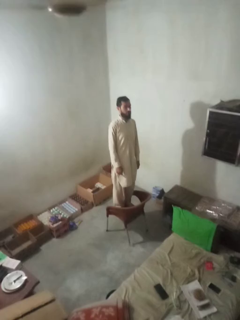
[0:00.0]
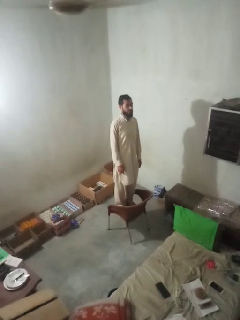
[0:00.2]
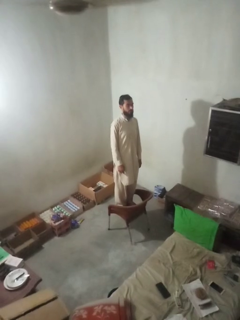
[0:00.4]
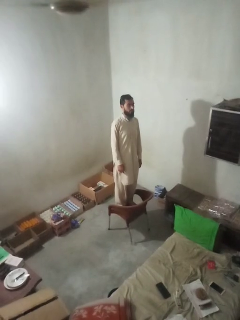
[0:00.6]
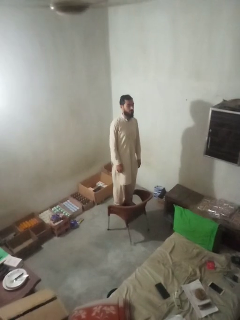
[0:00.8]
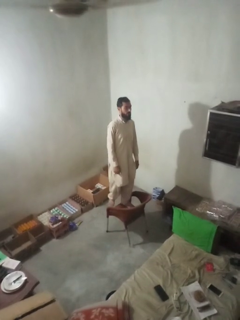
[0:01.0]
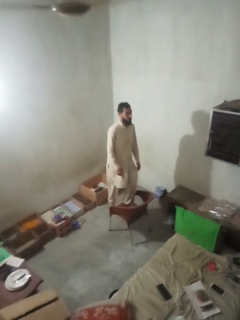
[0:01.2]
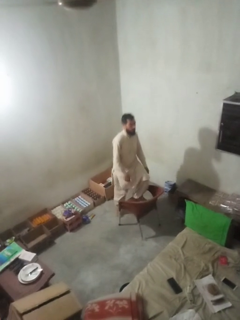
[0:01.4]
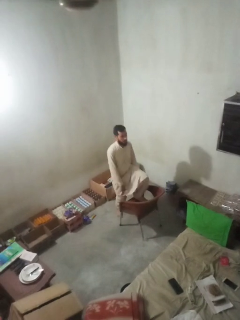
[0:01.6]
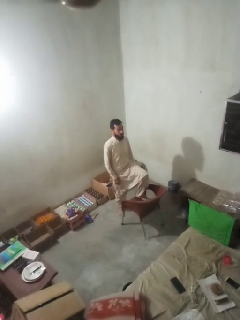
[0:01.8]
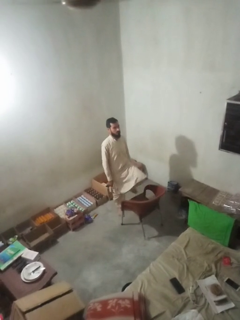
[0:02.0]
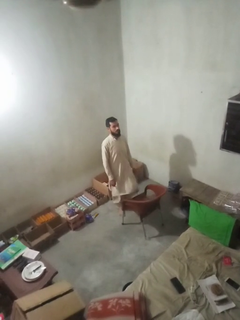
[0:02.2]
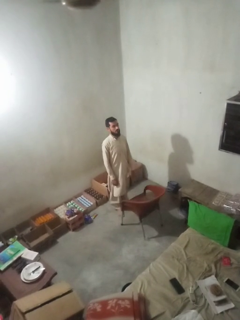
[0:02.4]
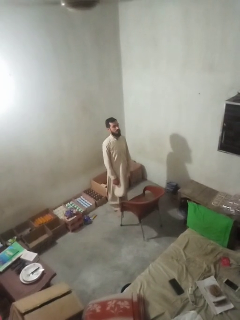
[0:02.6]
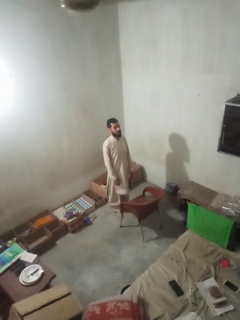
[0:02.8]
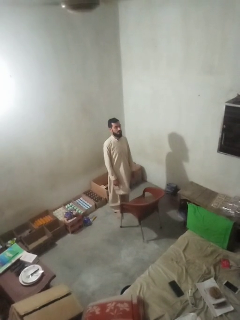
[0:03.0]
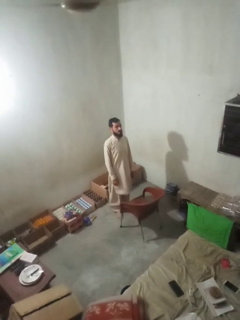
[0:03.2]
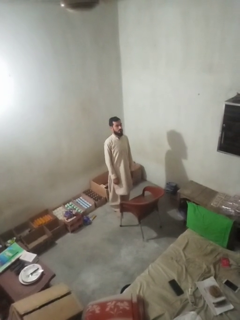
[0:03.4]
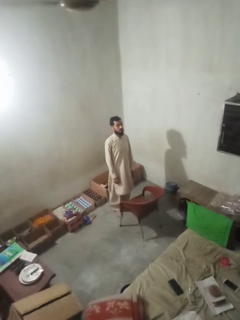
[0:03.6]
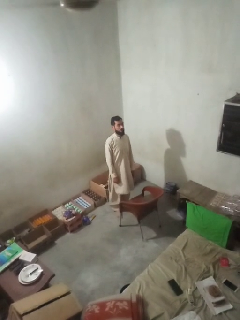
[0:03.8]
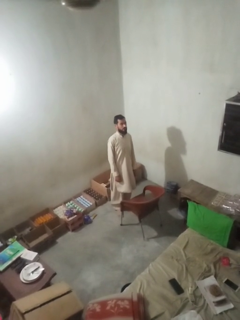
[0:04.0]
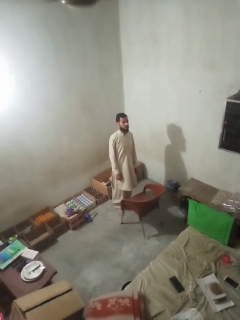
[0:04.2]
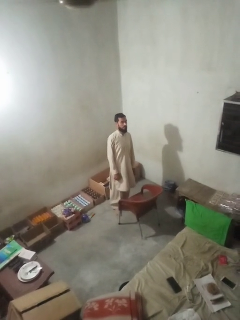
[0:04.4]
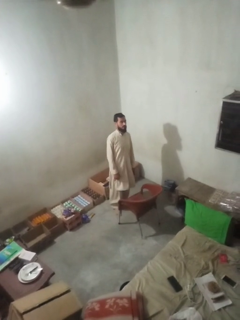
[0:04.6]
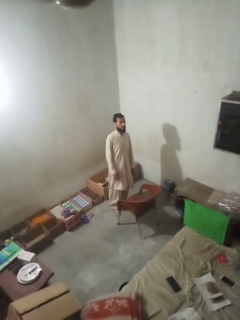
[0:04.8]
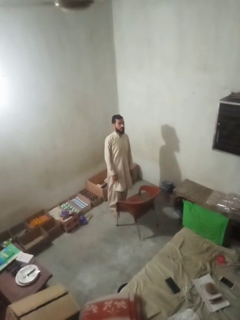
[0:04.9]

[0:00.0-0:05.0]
person climbs off chair

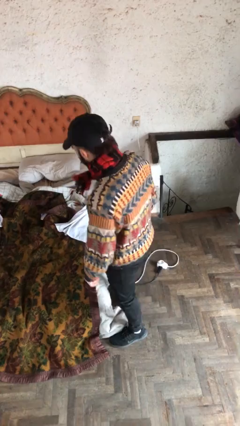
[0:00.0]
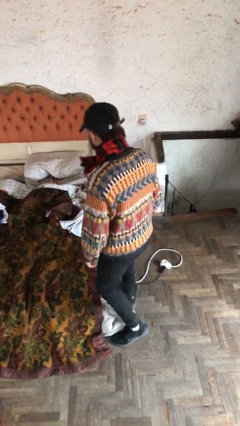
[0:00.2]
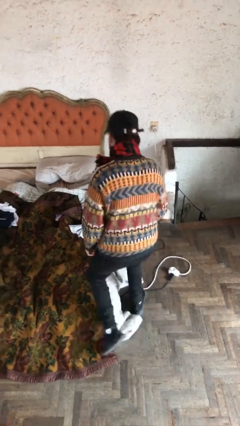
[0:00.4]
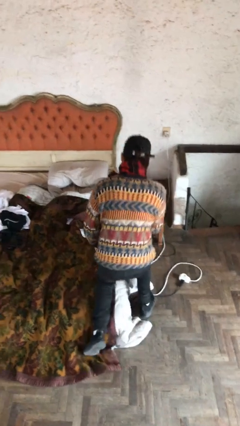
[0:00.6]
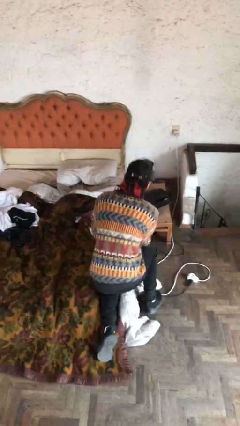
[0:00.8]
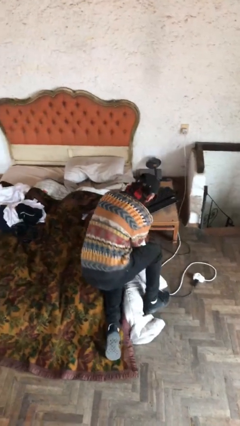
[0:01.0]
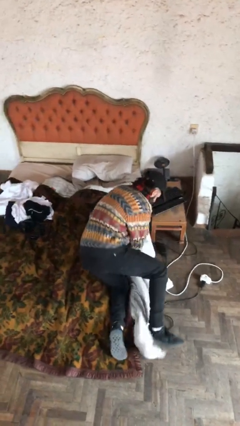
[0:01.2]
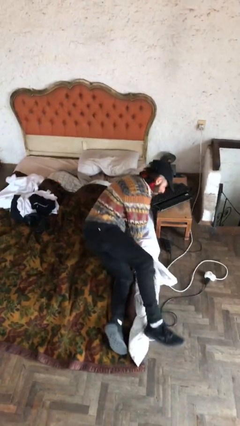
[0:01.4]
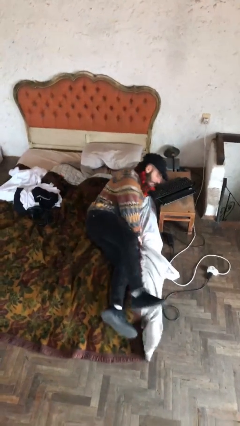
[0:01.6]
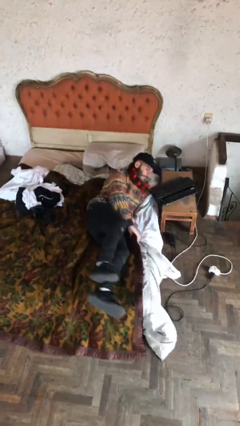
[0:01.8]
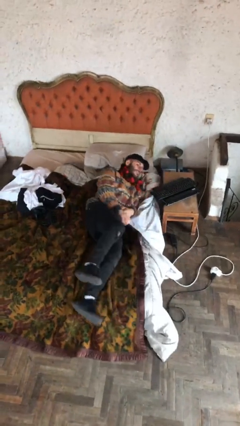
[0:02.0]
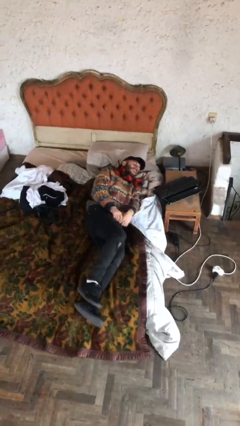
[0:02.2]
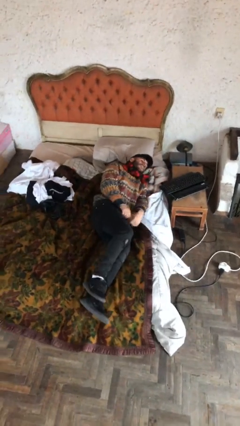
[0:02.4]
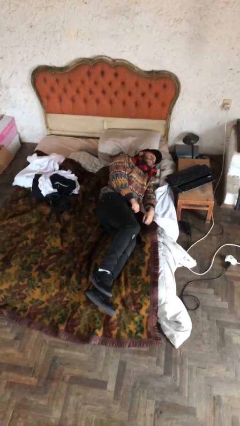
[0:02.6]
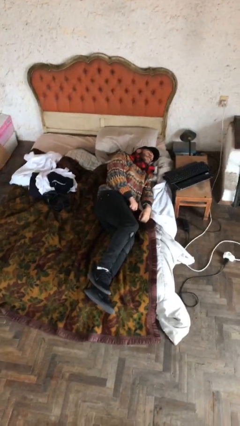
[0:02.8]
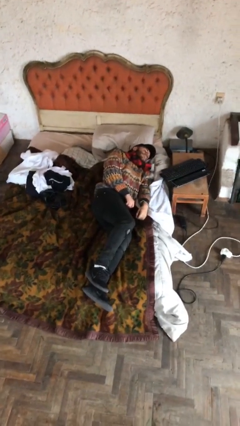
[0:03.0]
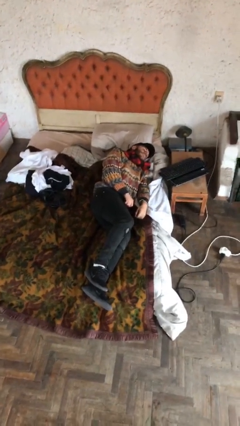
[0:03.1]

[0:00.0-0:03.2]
person lies down on bed

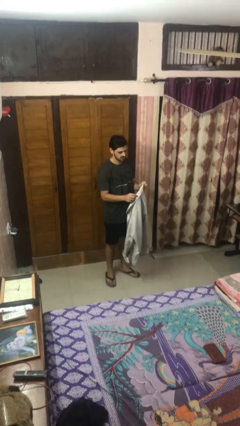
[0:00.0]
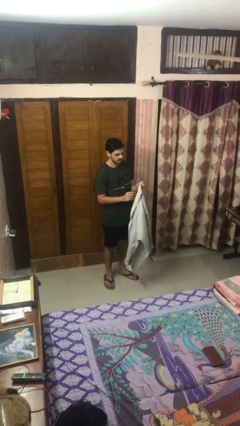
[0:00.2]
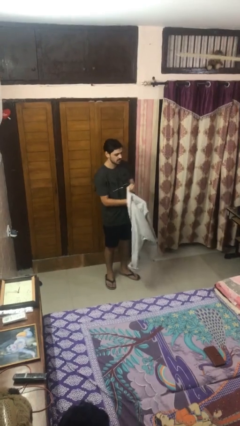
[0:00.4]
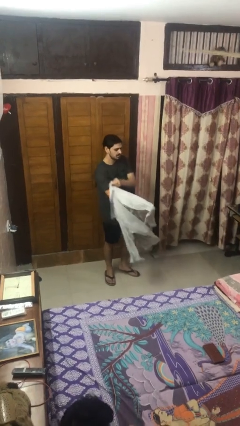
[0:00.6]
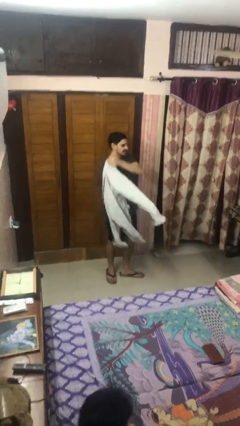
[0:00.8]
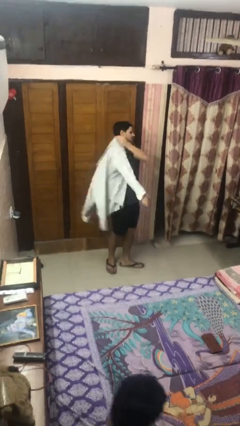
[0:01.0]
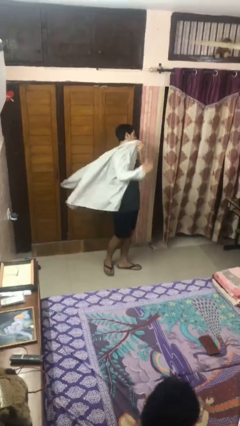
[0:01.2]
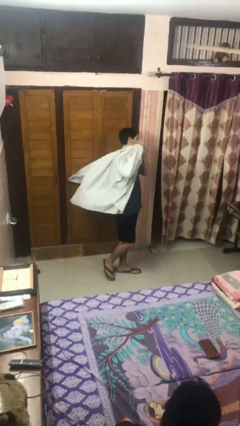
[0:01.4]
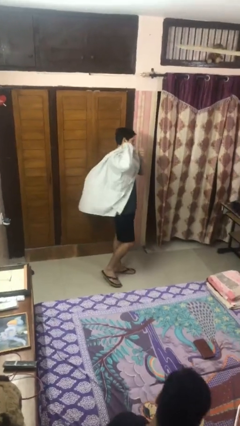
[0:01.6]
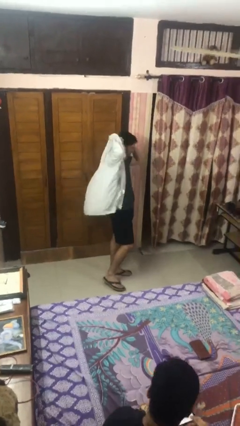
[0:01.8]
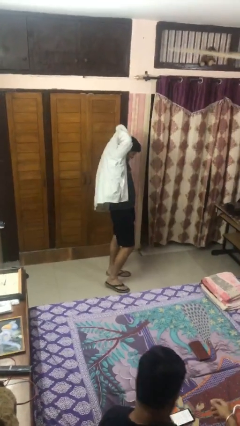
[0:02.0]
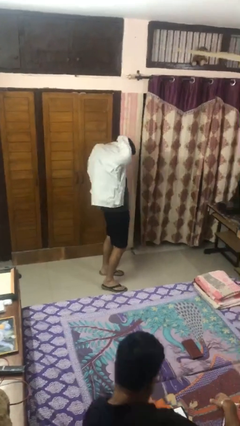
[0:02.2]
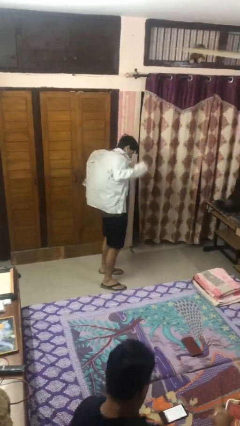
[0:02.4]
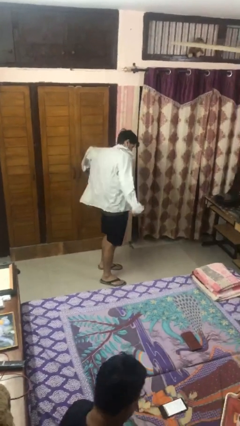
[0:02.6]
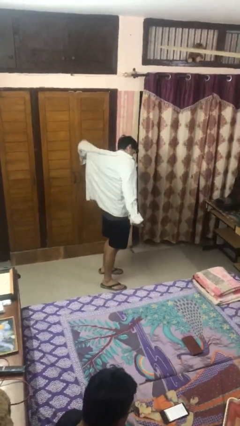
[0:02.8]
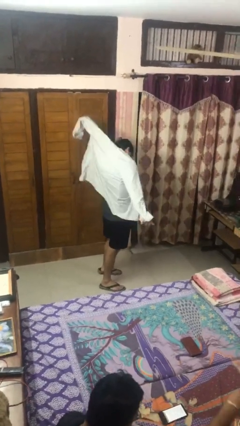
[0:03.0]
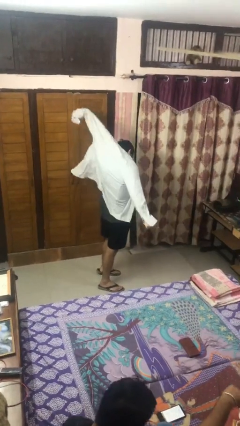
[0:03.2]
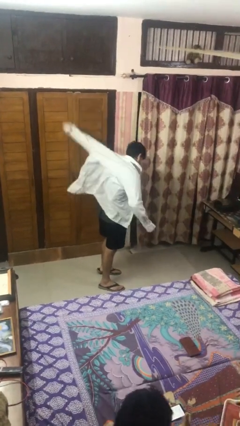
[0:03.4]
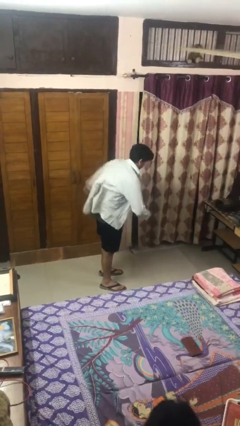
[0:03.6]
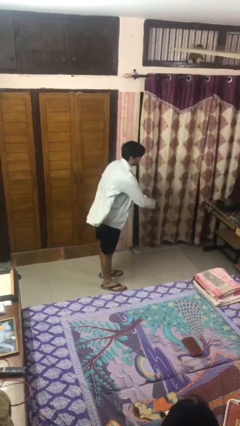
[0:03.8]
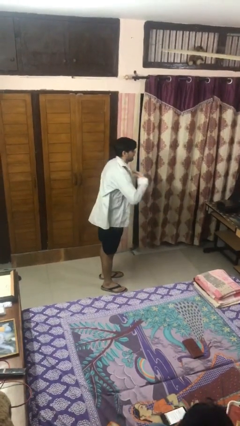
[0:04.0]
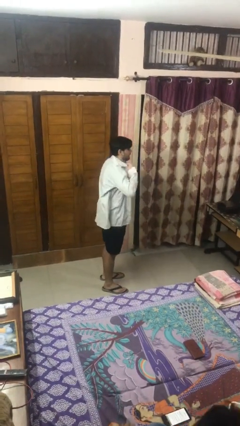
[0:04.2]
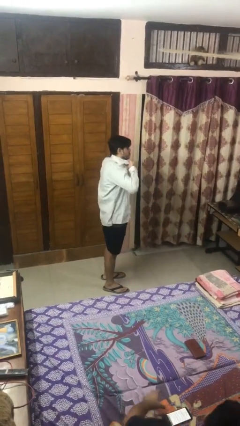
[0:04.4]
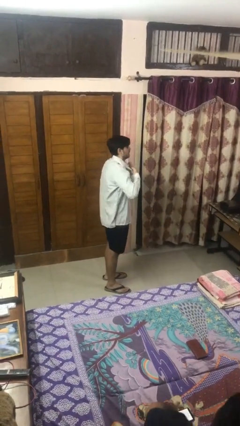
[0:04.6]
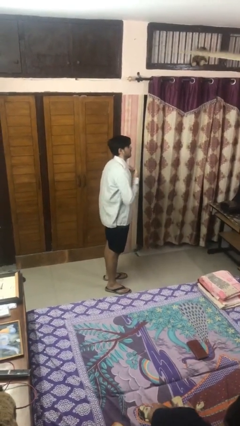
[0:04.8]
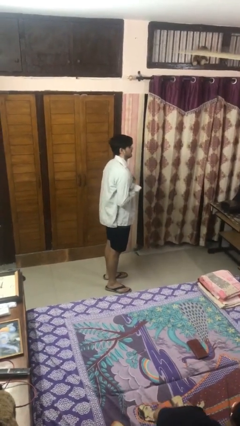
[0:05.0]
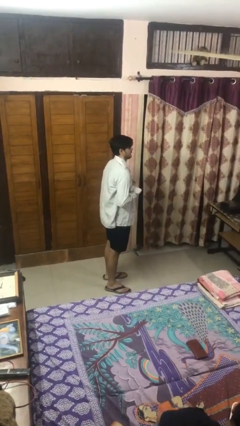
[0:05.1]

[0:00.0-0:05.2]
person puts on shirt

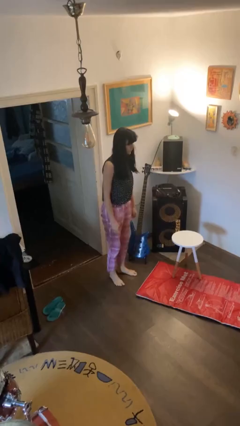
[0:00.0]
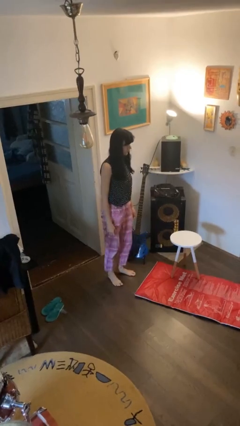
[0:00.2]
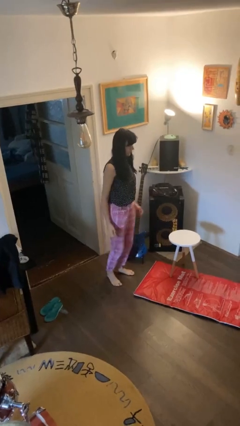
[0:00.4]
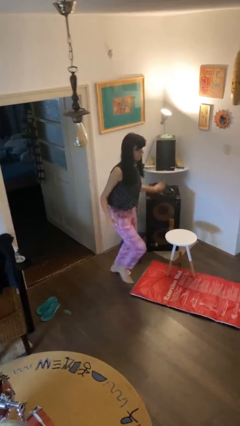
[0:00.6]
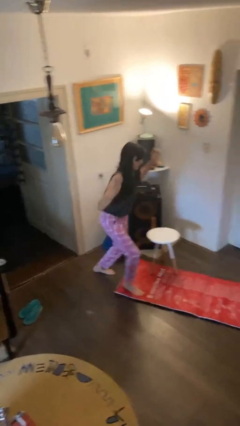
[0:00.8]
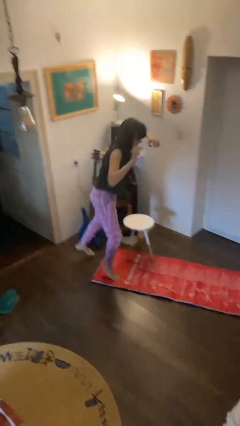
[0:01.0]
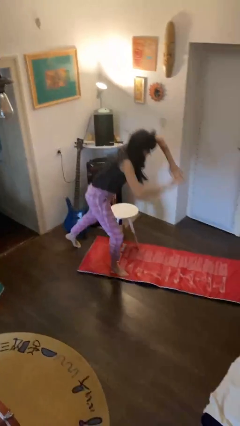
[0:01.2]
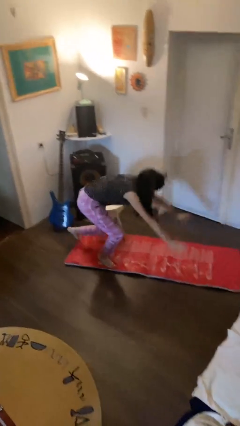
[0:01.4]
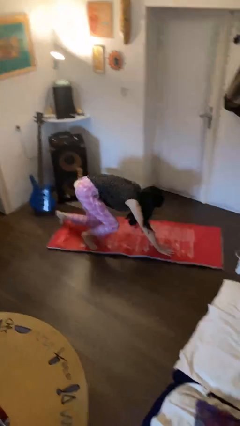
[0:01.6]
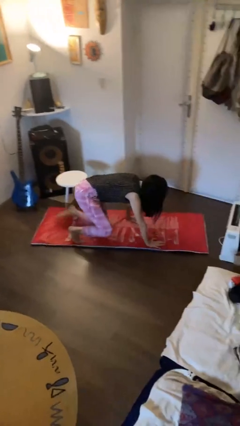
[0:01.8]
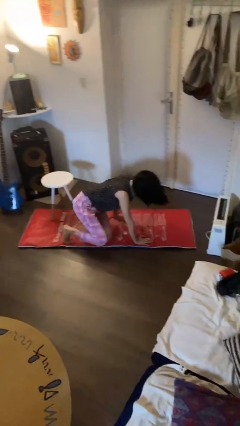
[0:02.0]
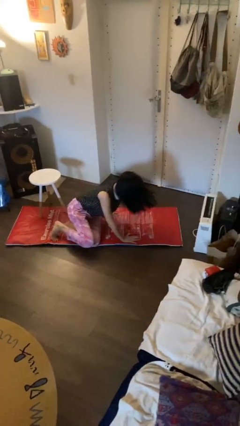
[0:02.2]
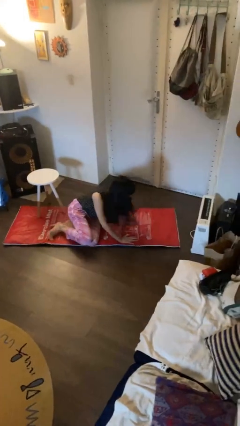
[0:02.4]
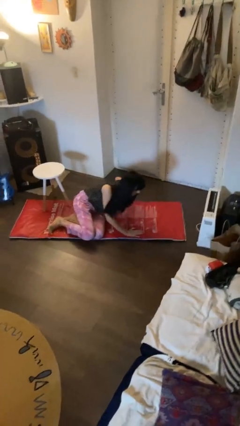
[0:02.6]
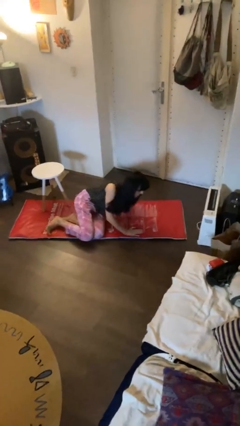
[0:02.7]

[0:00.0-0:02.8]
person trips on object on floor

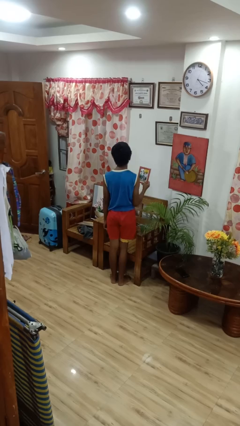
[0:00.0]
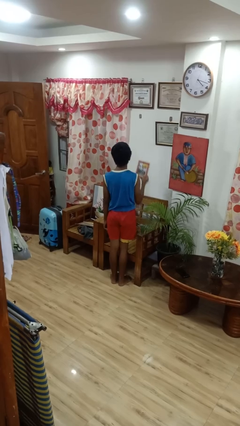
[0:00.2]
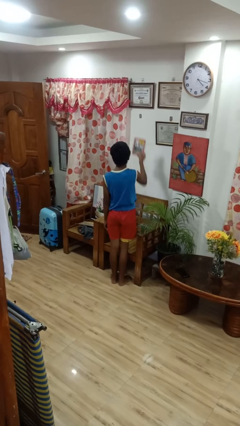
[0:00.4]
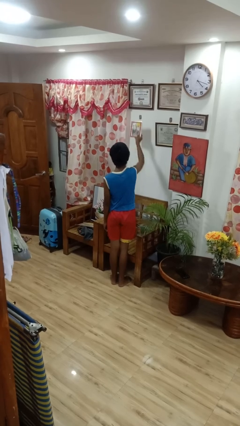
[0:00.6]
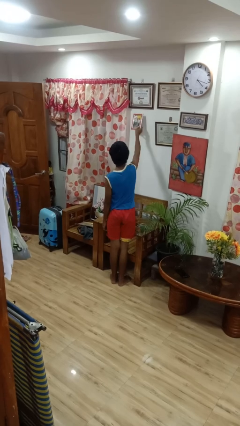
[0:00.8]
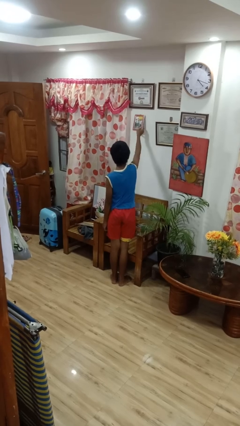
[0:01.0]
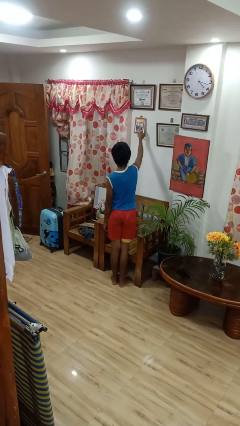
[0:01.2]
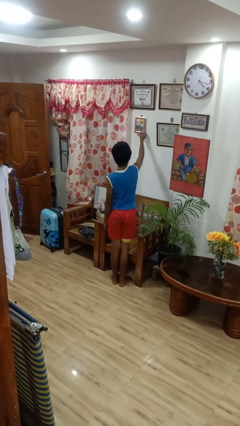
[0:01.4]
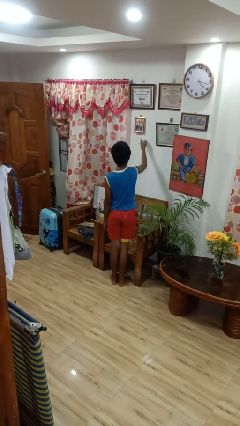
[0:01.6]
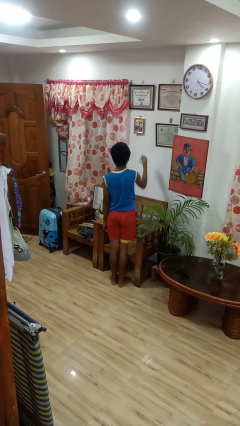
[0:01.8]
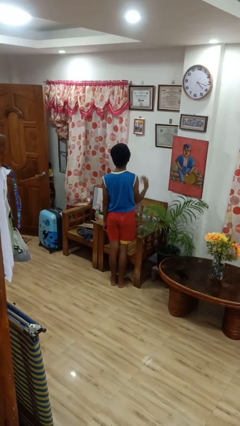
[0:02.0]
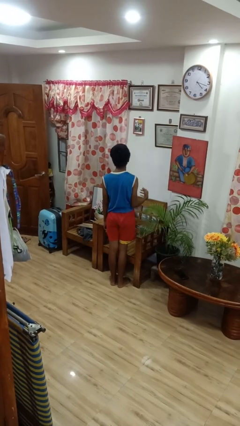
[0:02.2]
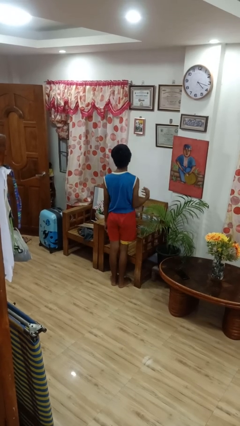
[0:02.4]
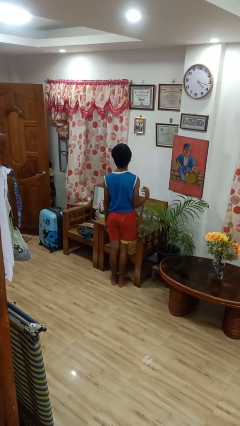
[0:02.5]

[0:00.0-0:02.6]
person puts up picture frame
